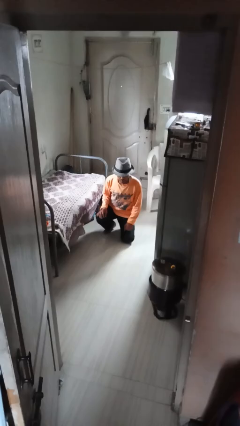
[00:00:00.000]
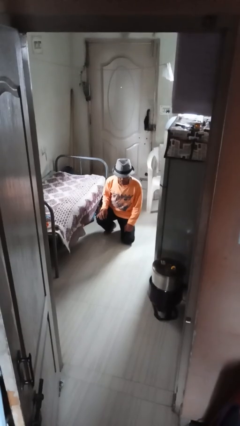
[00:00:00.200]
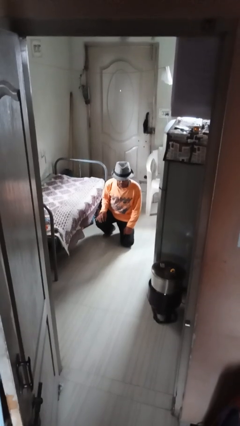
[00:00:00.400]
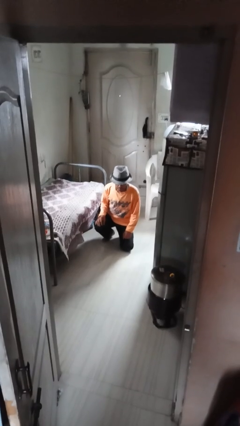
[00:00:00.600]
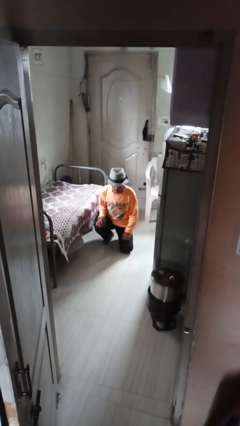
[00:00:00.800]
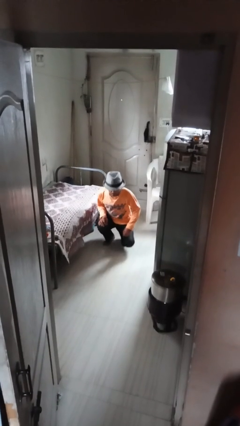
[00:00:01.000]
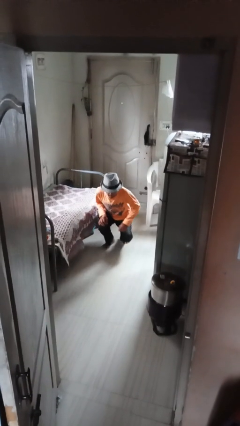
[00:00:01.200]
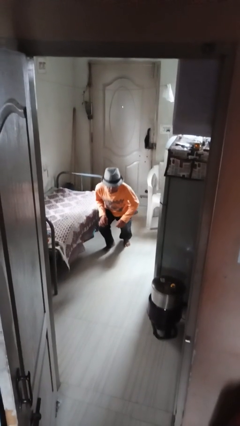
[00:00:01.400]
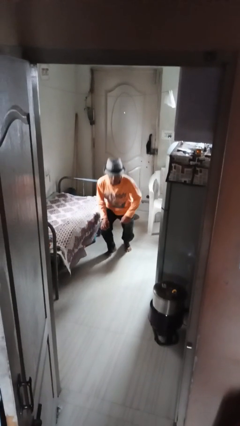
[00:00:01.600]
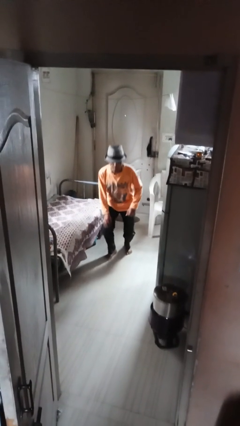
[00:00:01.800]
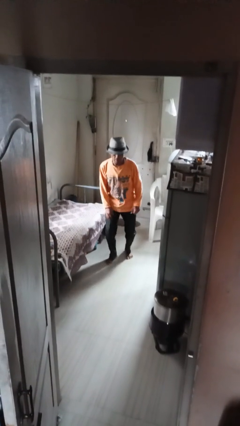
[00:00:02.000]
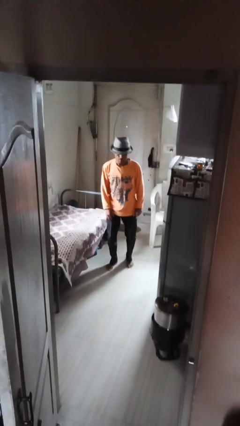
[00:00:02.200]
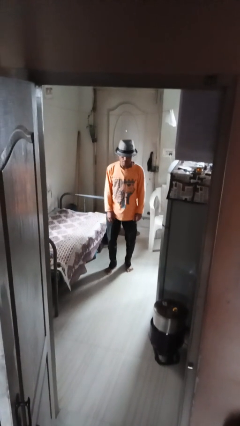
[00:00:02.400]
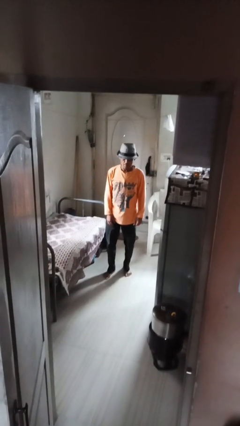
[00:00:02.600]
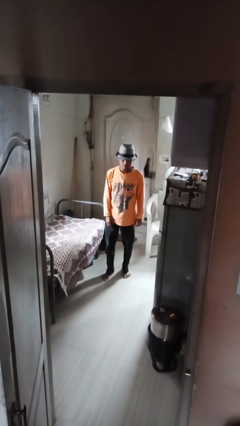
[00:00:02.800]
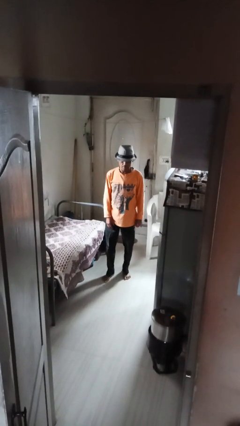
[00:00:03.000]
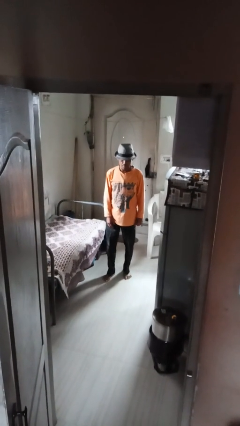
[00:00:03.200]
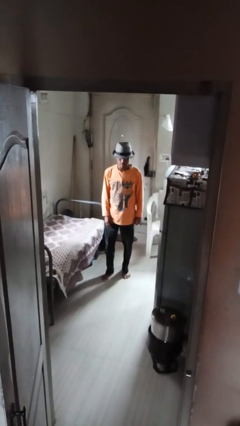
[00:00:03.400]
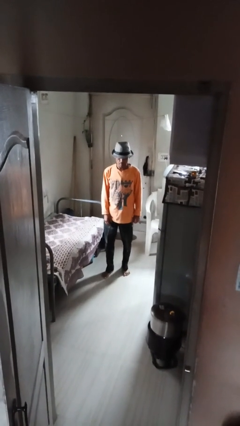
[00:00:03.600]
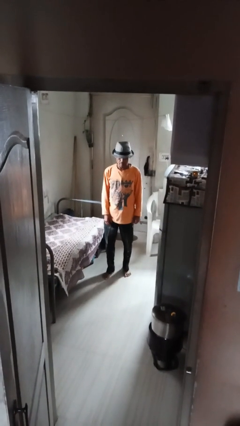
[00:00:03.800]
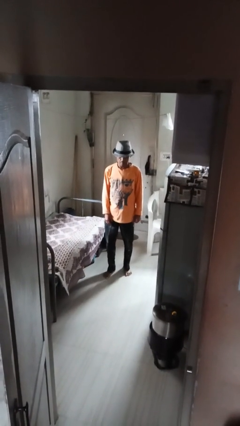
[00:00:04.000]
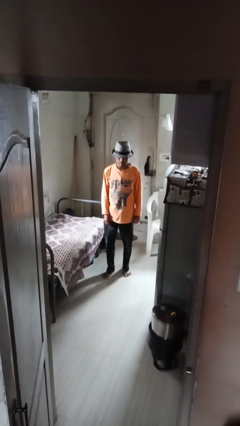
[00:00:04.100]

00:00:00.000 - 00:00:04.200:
person stands up from floor

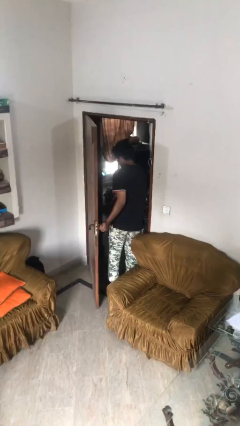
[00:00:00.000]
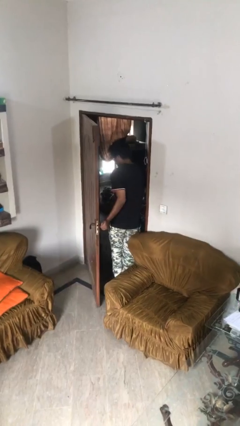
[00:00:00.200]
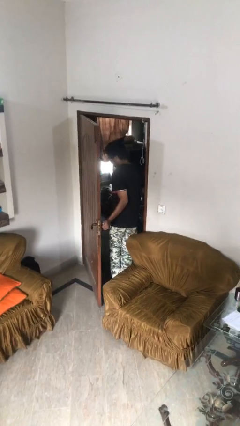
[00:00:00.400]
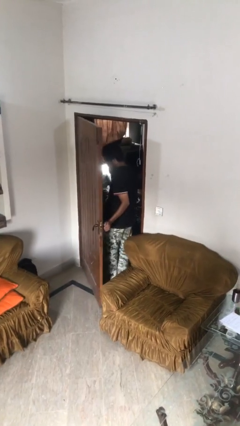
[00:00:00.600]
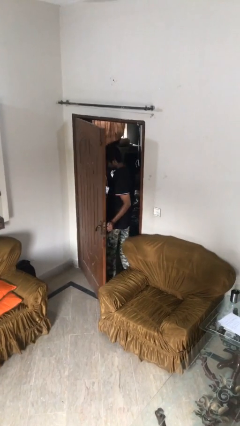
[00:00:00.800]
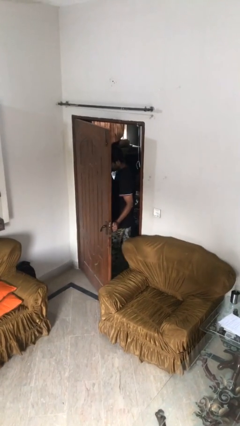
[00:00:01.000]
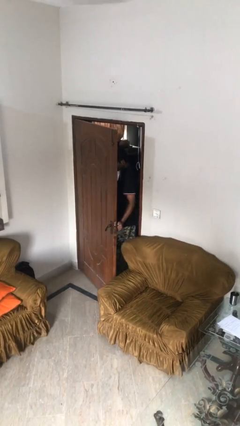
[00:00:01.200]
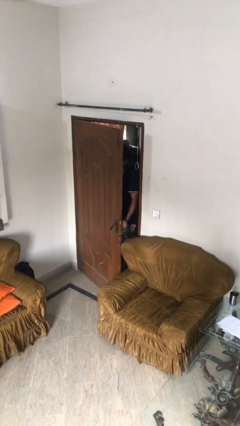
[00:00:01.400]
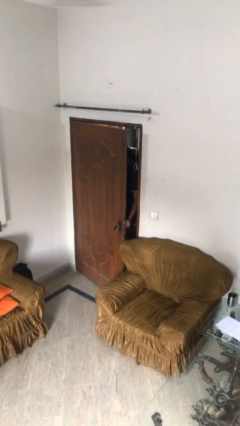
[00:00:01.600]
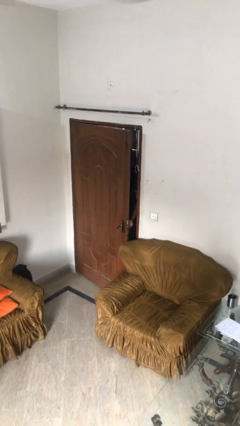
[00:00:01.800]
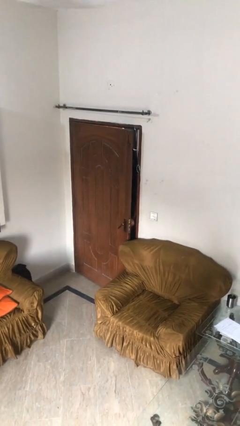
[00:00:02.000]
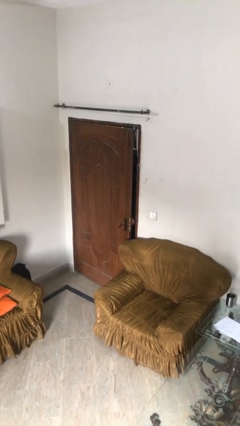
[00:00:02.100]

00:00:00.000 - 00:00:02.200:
person closes facility door

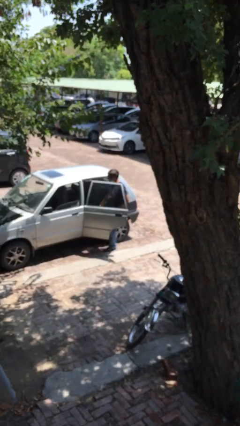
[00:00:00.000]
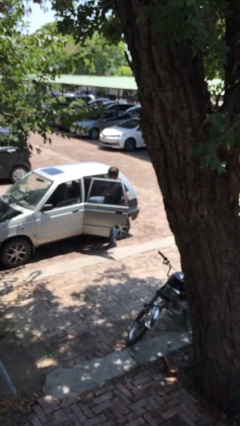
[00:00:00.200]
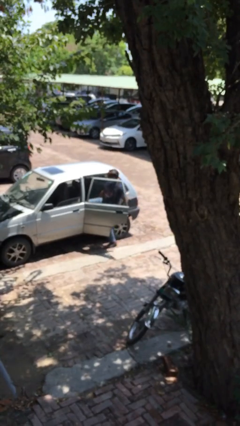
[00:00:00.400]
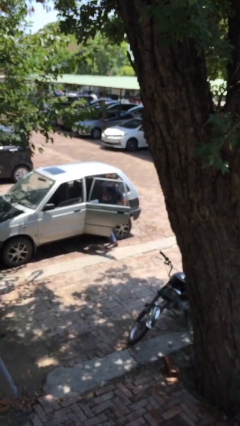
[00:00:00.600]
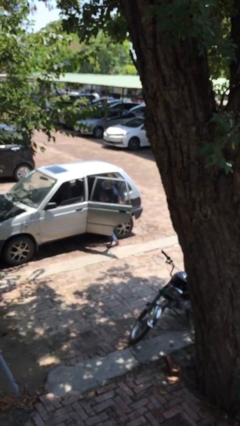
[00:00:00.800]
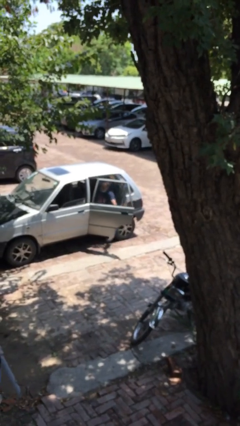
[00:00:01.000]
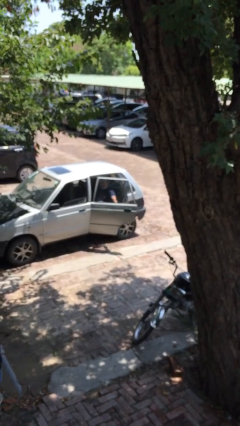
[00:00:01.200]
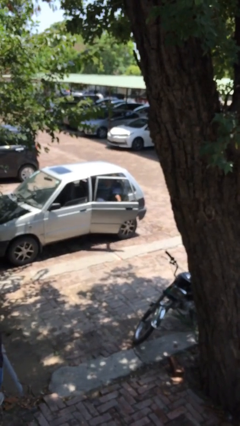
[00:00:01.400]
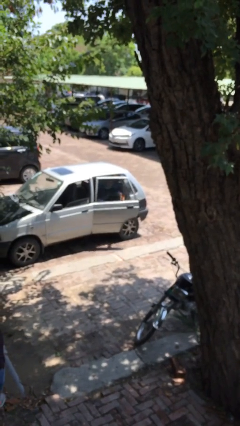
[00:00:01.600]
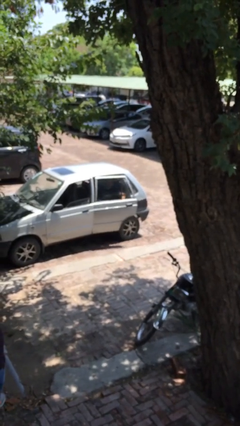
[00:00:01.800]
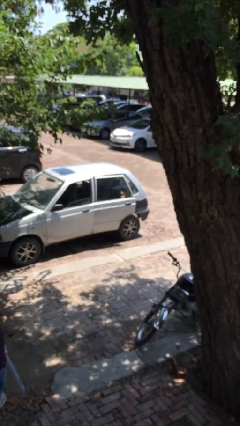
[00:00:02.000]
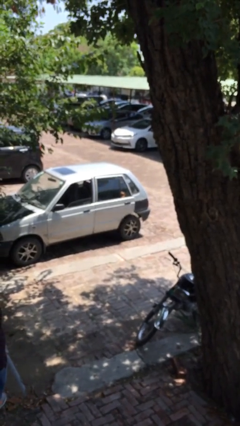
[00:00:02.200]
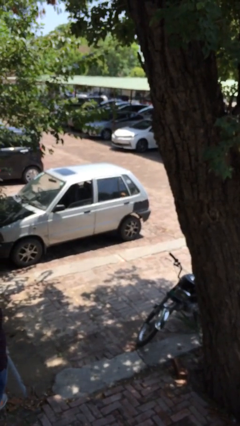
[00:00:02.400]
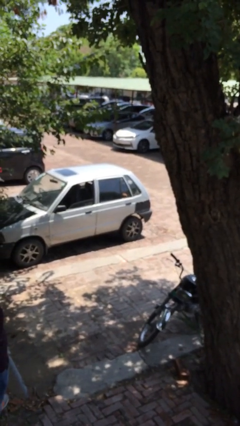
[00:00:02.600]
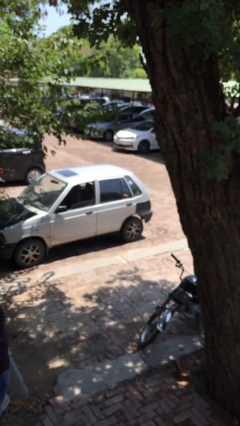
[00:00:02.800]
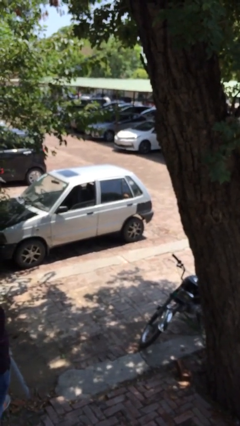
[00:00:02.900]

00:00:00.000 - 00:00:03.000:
person closes car door

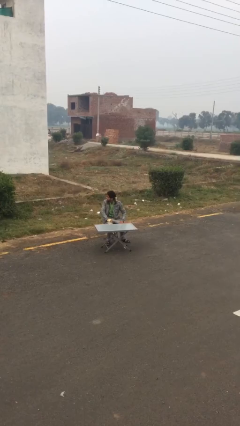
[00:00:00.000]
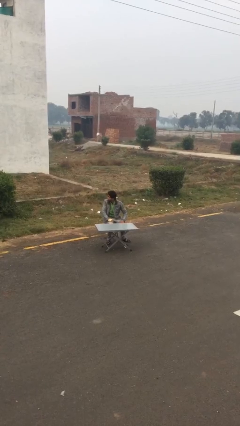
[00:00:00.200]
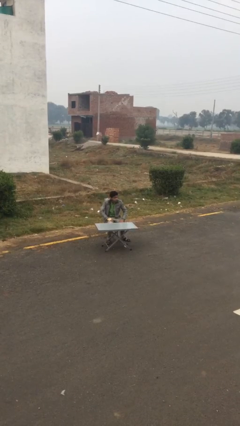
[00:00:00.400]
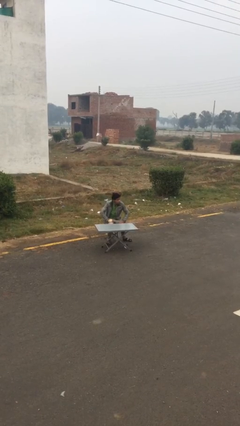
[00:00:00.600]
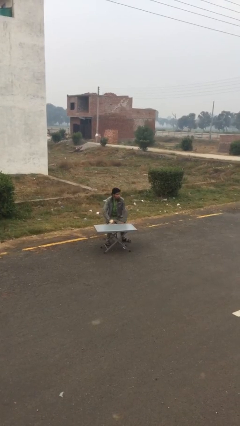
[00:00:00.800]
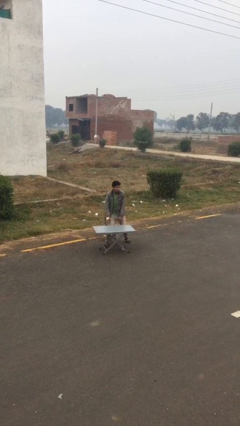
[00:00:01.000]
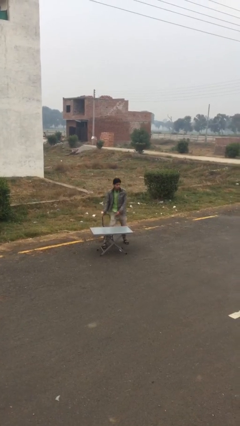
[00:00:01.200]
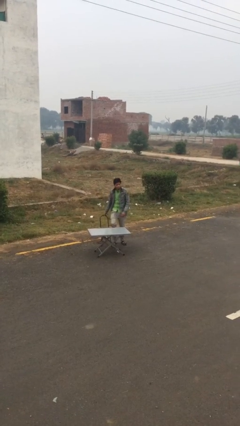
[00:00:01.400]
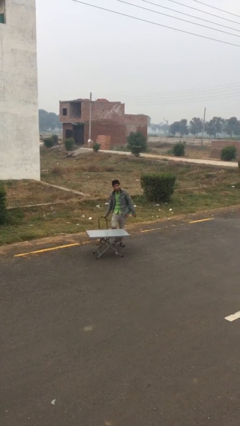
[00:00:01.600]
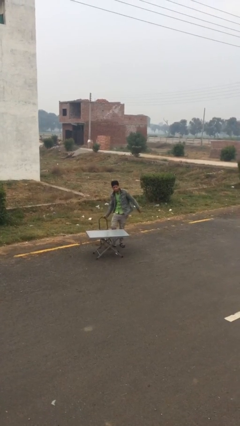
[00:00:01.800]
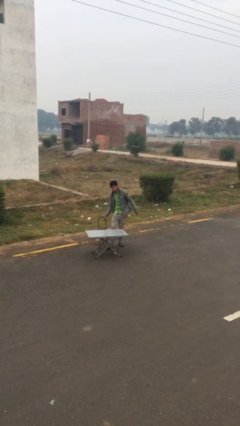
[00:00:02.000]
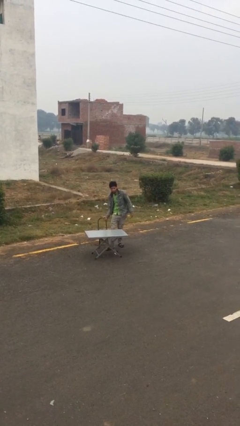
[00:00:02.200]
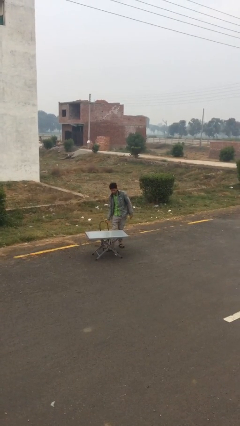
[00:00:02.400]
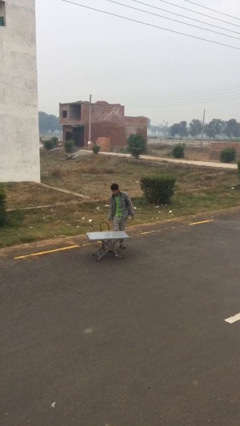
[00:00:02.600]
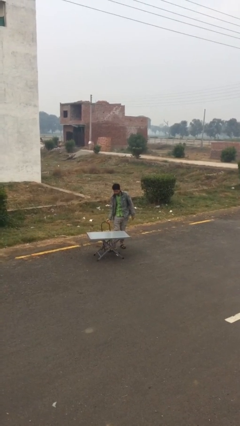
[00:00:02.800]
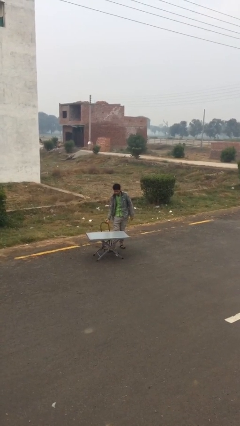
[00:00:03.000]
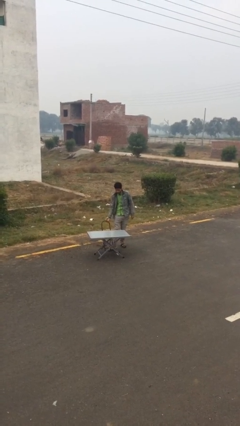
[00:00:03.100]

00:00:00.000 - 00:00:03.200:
person stands up

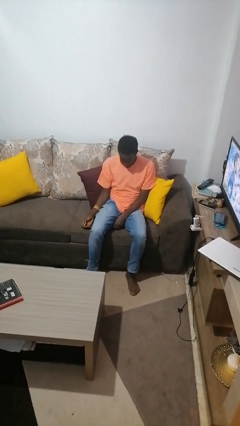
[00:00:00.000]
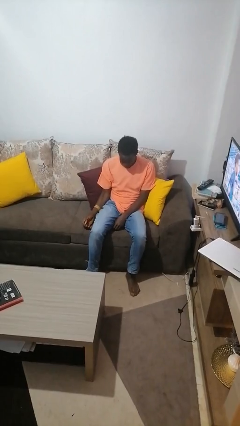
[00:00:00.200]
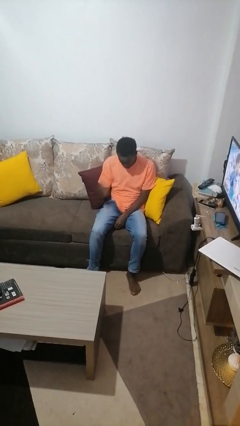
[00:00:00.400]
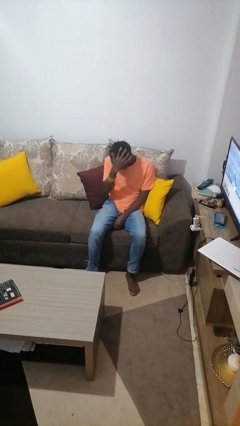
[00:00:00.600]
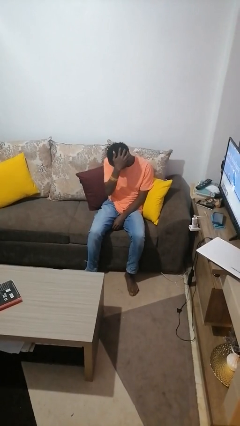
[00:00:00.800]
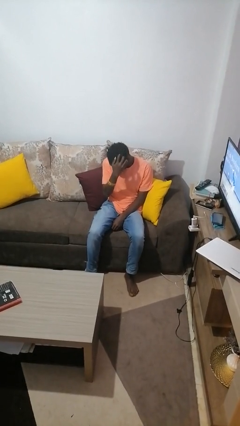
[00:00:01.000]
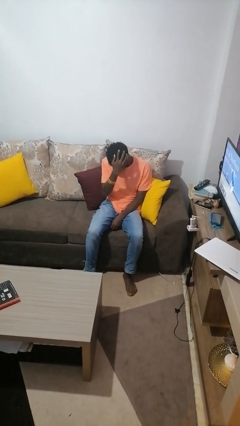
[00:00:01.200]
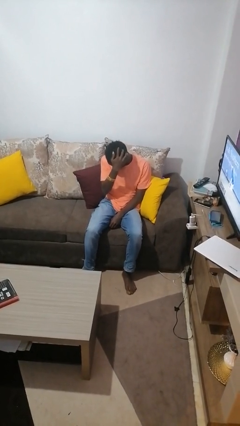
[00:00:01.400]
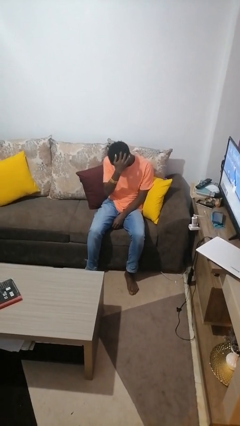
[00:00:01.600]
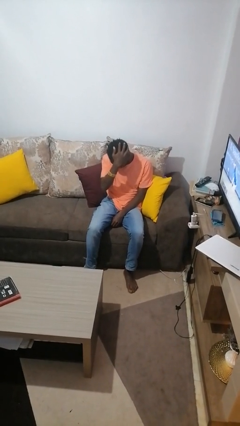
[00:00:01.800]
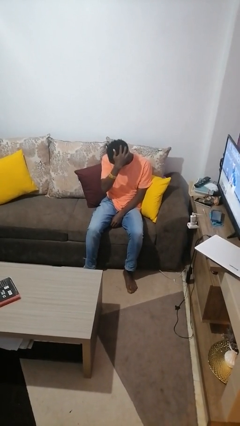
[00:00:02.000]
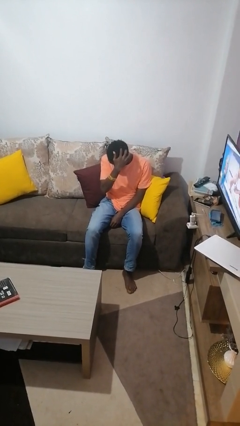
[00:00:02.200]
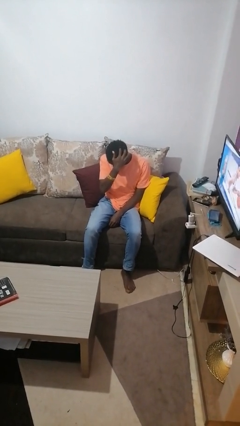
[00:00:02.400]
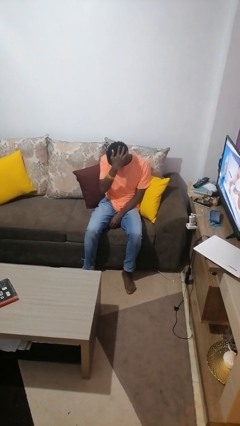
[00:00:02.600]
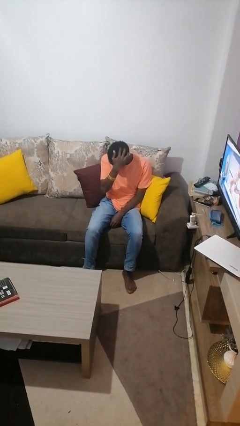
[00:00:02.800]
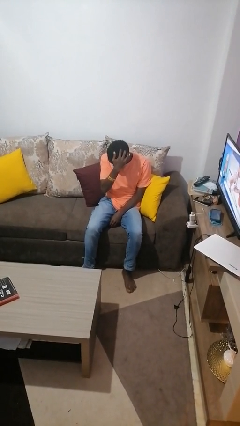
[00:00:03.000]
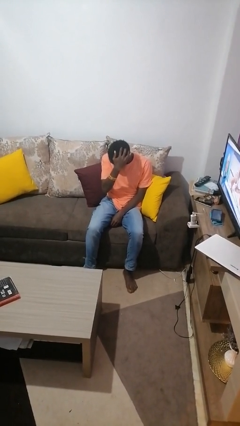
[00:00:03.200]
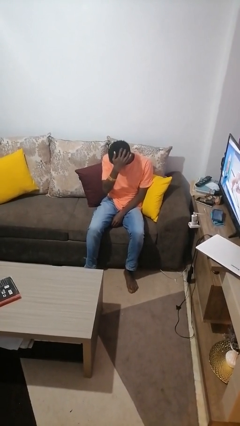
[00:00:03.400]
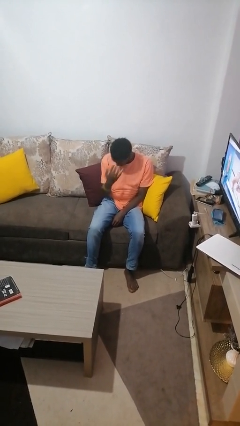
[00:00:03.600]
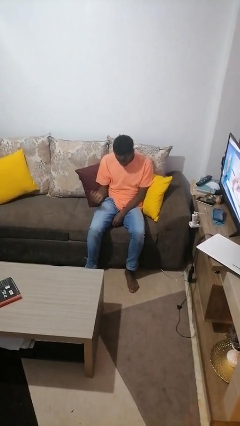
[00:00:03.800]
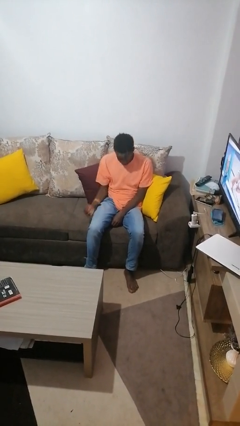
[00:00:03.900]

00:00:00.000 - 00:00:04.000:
person strokes hair

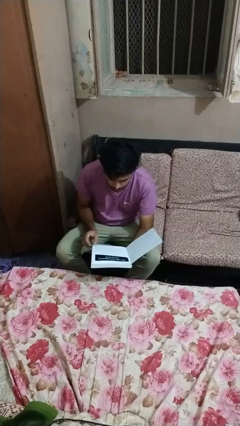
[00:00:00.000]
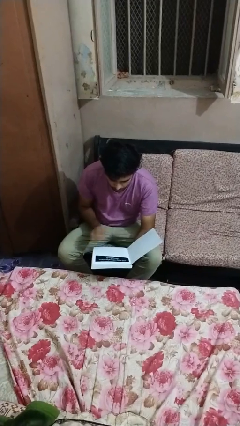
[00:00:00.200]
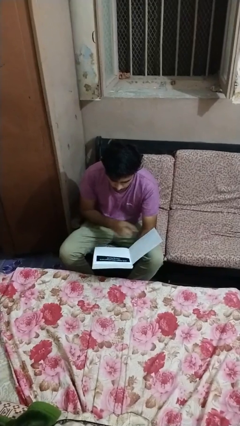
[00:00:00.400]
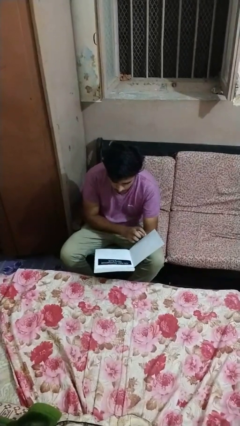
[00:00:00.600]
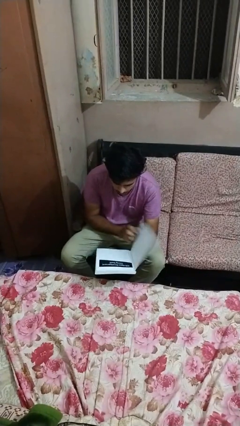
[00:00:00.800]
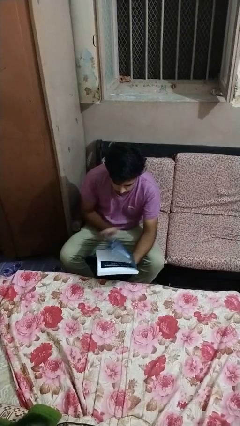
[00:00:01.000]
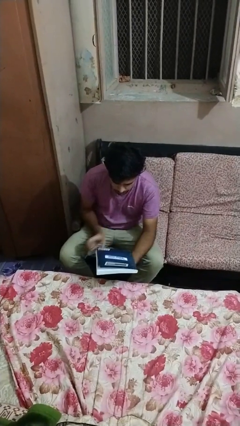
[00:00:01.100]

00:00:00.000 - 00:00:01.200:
person reads newspaper
